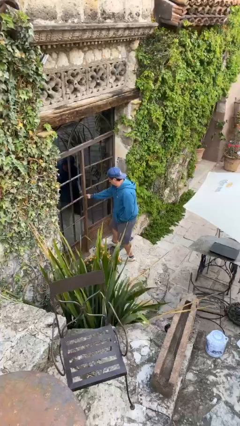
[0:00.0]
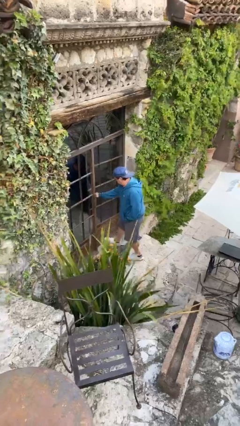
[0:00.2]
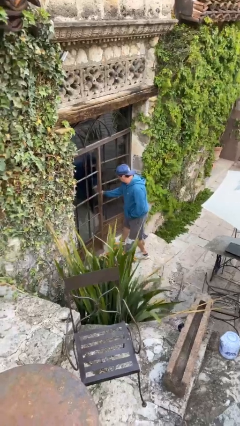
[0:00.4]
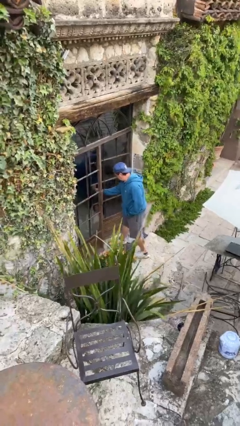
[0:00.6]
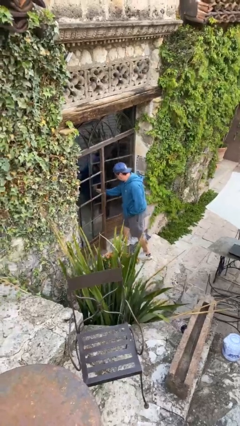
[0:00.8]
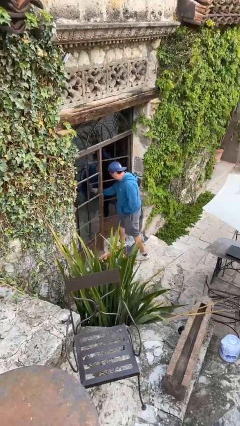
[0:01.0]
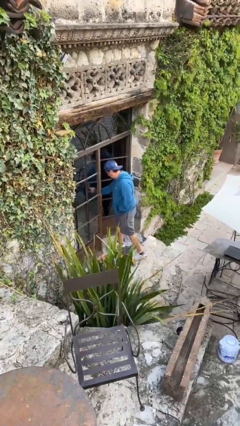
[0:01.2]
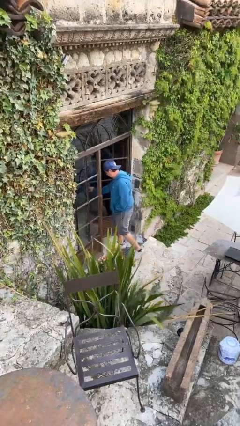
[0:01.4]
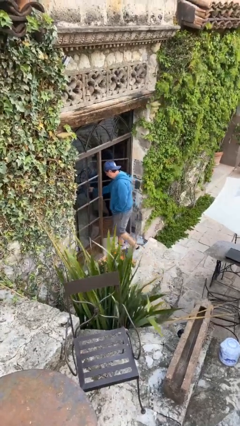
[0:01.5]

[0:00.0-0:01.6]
person opens facility door

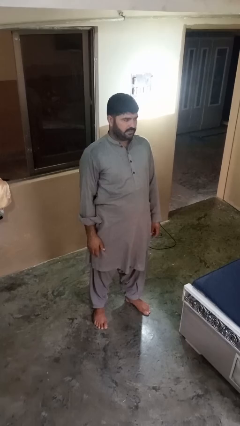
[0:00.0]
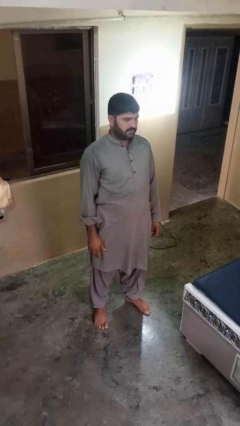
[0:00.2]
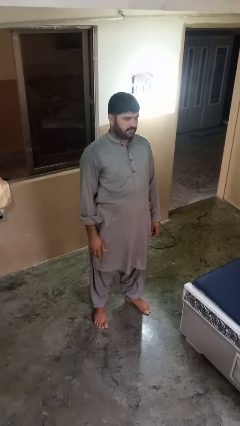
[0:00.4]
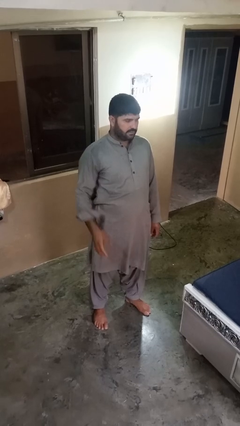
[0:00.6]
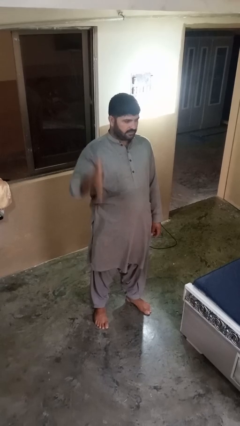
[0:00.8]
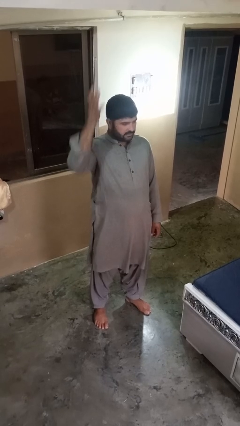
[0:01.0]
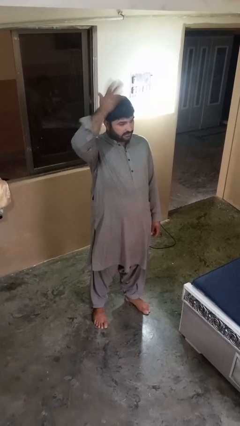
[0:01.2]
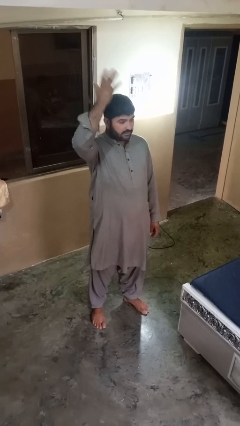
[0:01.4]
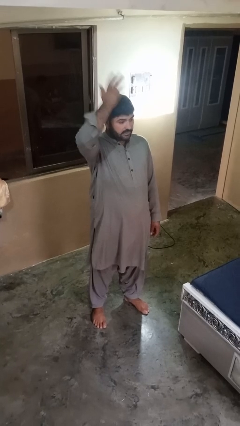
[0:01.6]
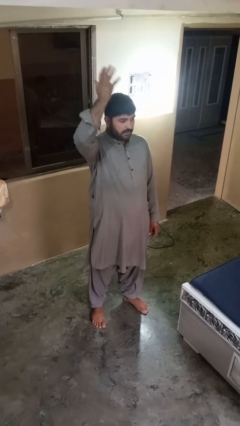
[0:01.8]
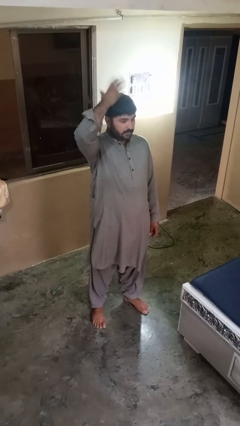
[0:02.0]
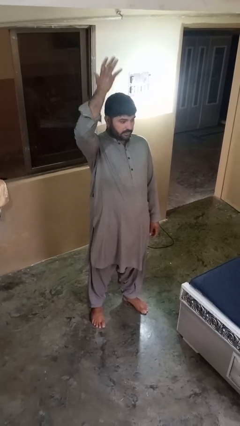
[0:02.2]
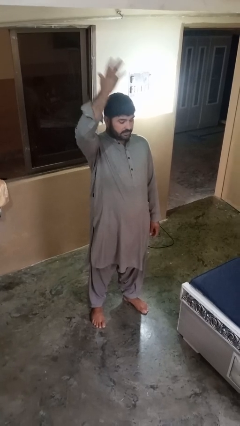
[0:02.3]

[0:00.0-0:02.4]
person pats head

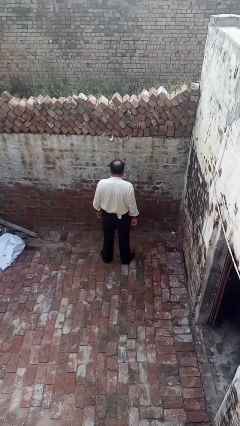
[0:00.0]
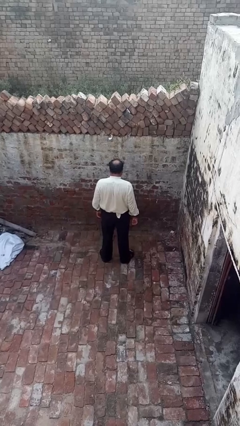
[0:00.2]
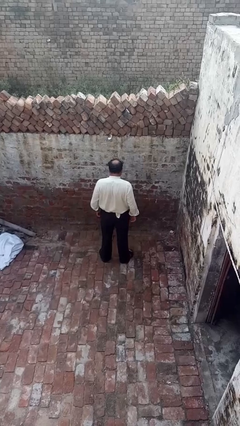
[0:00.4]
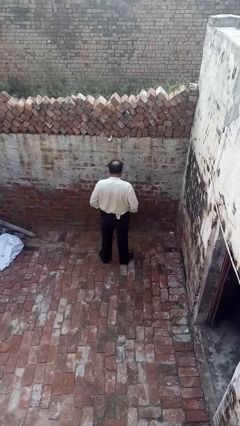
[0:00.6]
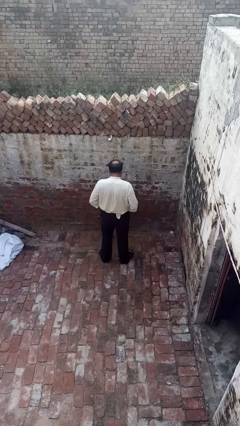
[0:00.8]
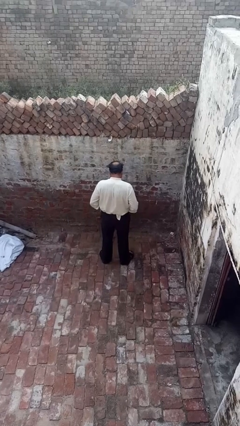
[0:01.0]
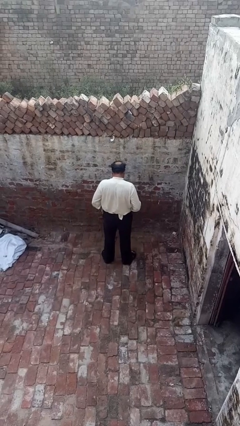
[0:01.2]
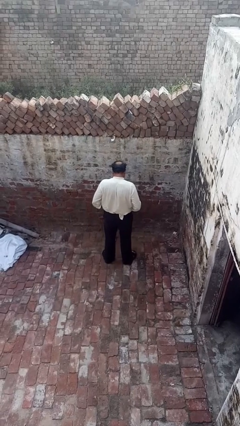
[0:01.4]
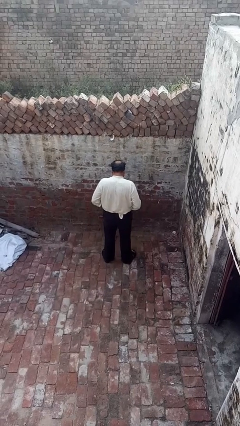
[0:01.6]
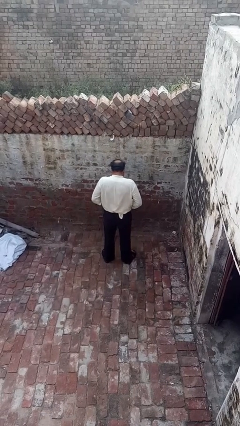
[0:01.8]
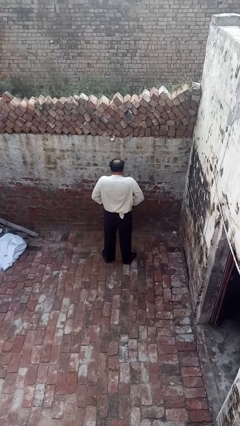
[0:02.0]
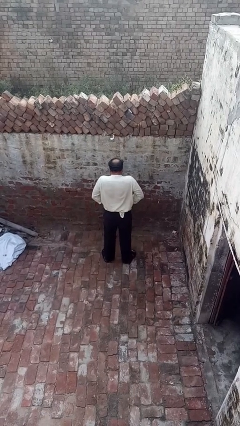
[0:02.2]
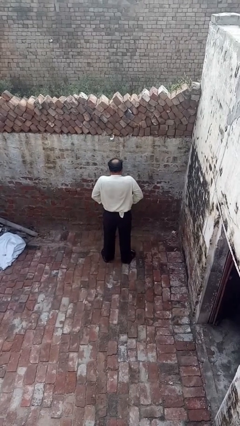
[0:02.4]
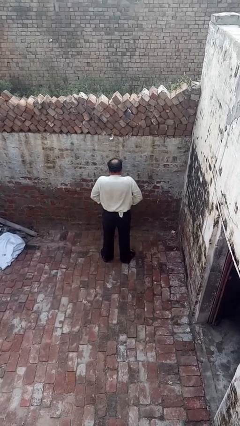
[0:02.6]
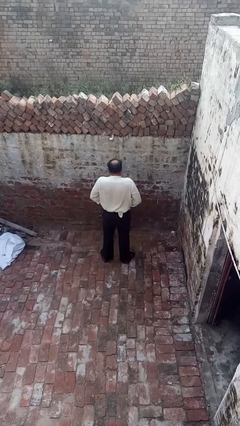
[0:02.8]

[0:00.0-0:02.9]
person hikes up pants

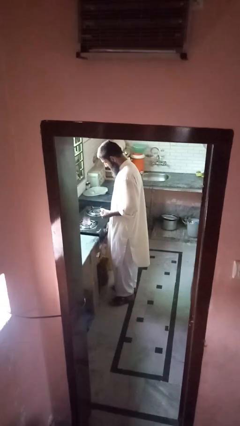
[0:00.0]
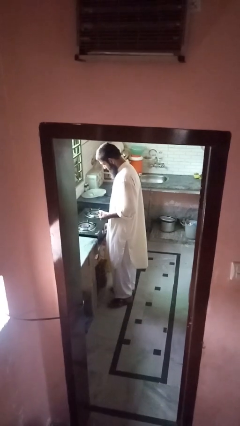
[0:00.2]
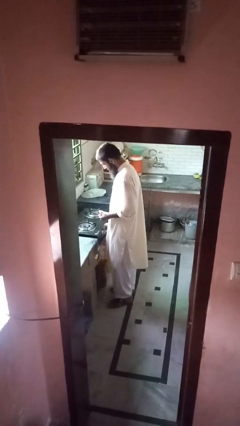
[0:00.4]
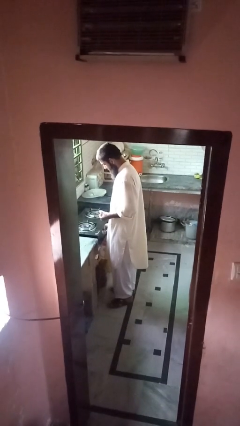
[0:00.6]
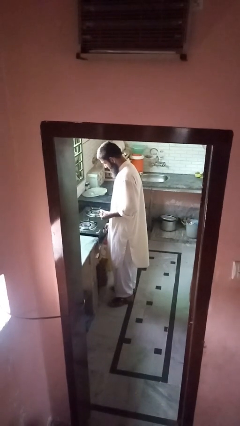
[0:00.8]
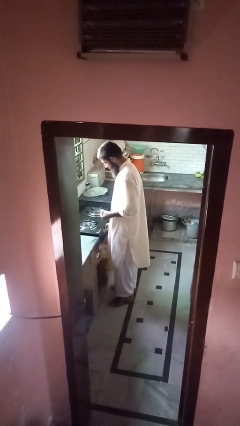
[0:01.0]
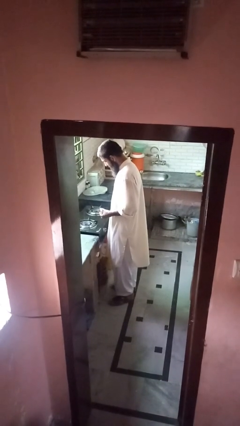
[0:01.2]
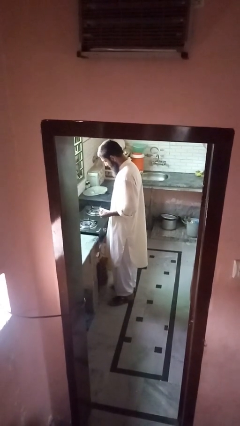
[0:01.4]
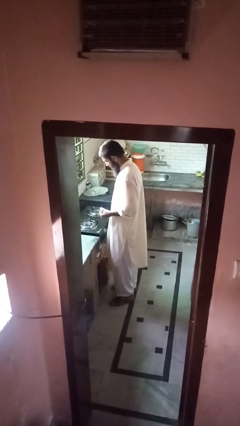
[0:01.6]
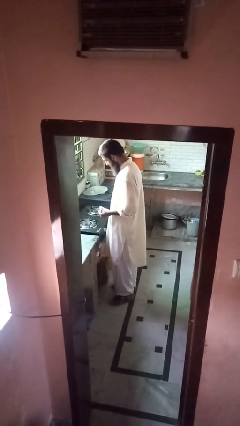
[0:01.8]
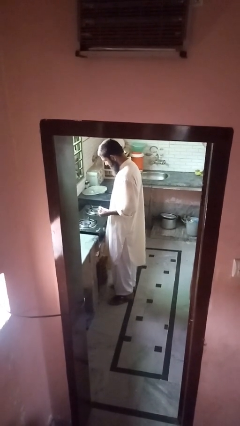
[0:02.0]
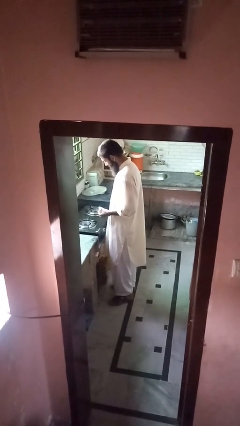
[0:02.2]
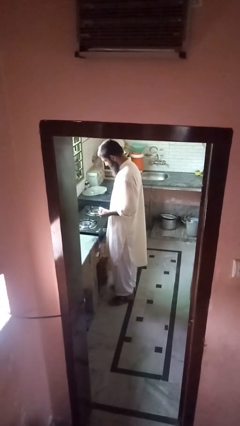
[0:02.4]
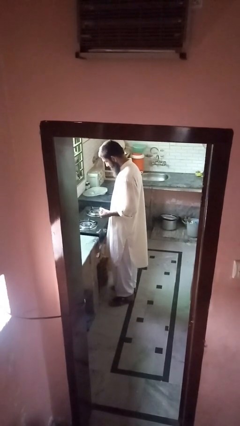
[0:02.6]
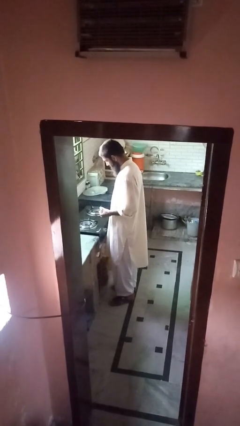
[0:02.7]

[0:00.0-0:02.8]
person turns off stovetop

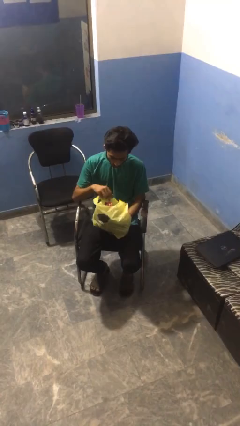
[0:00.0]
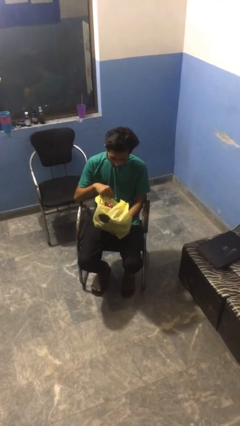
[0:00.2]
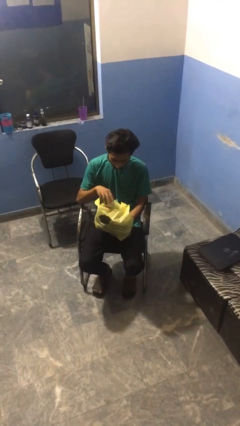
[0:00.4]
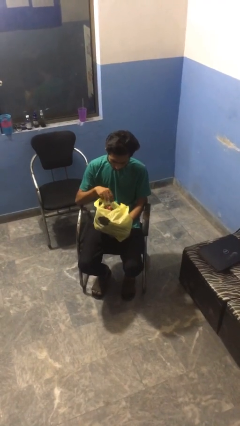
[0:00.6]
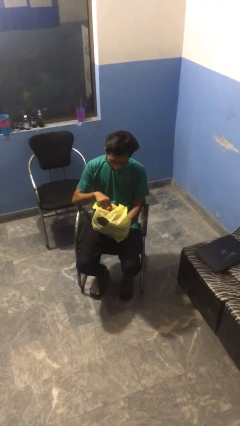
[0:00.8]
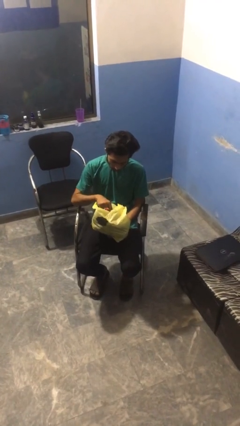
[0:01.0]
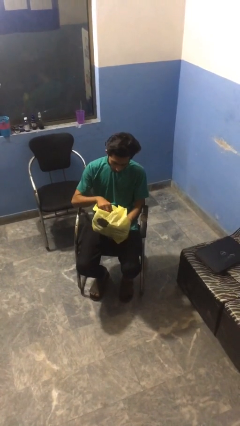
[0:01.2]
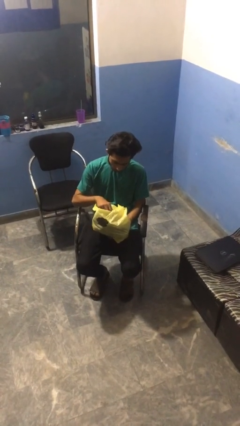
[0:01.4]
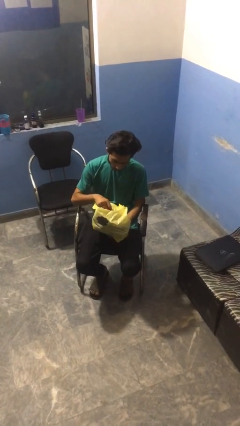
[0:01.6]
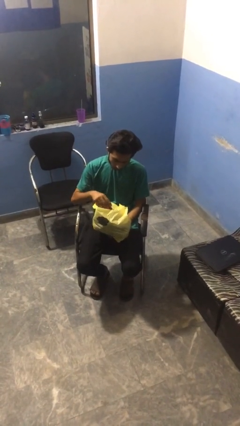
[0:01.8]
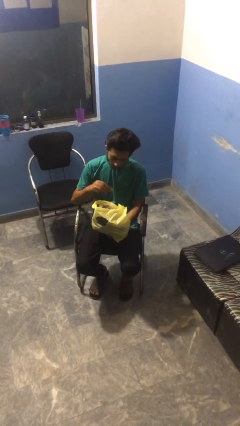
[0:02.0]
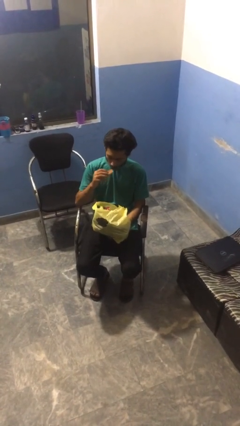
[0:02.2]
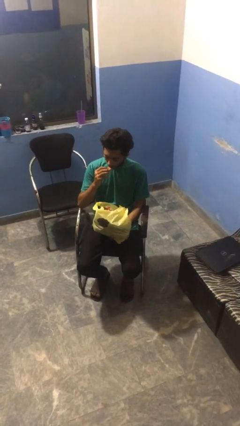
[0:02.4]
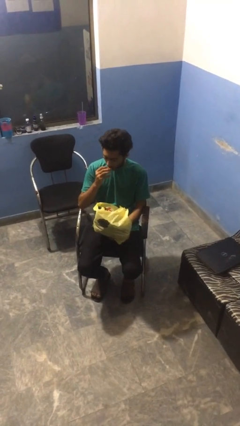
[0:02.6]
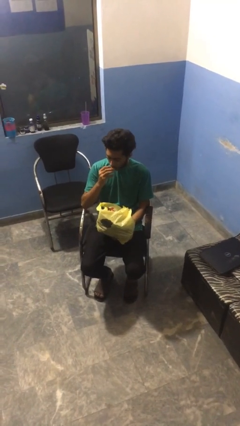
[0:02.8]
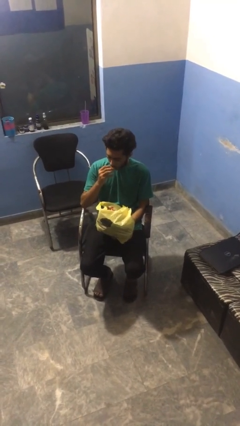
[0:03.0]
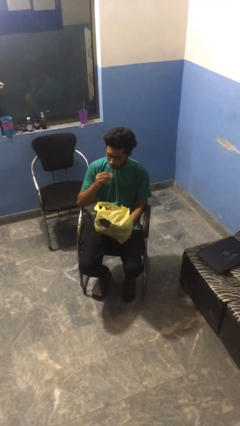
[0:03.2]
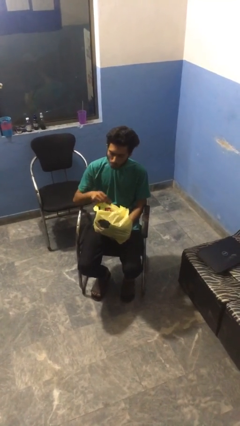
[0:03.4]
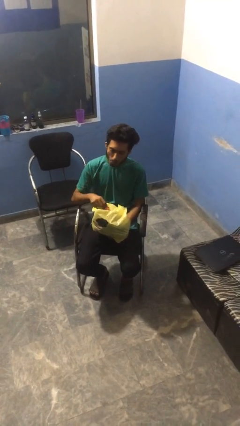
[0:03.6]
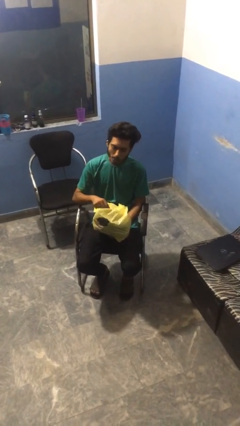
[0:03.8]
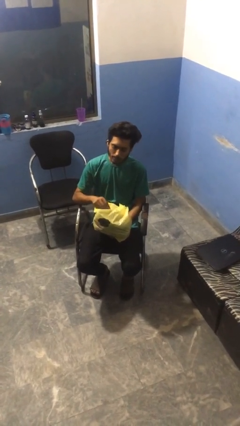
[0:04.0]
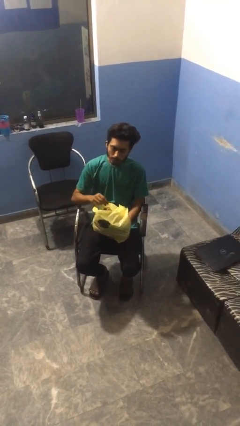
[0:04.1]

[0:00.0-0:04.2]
person eats snack from bag

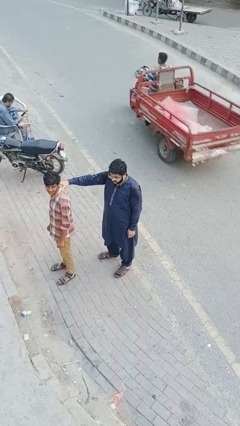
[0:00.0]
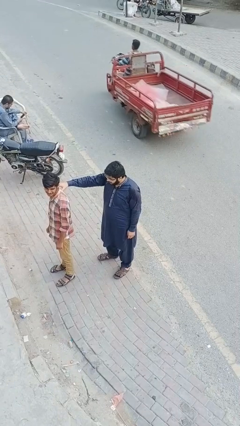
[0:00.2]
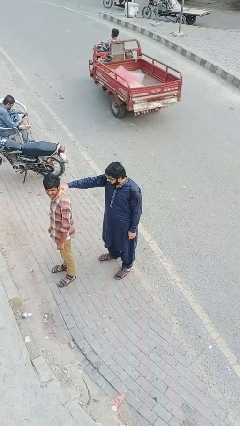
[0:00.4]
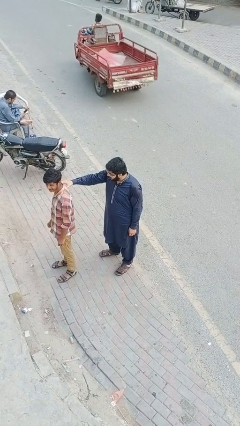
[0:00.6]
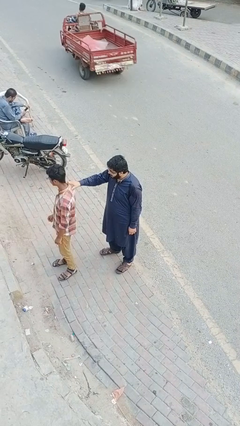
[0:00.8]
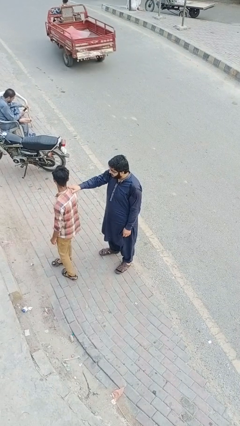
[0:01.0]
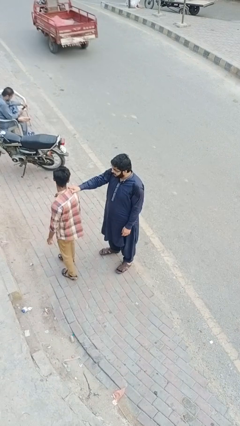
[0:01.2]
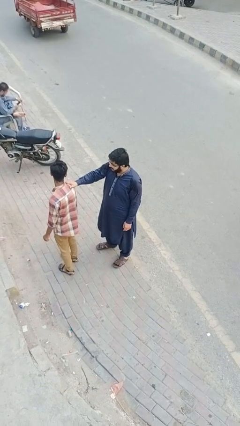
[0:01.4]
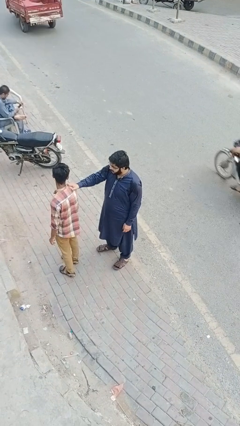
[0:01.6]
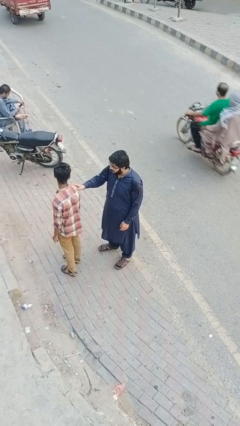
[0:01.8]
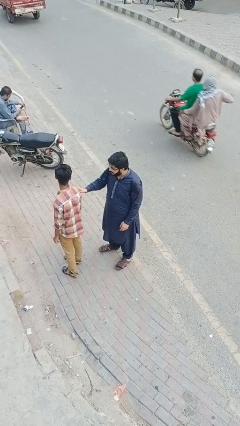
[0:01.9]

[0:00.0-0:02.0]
person grabs person by shoulder

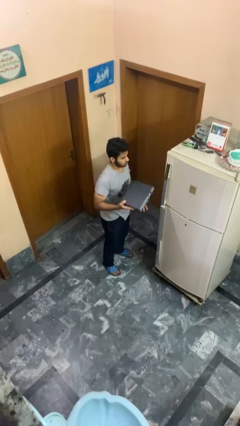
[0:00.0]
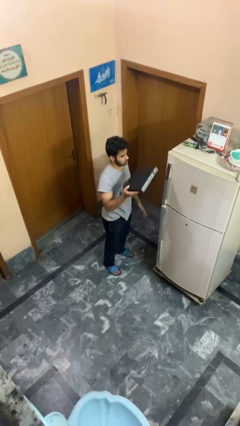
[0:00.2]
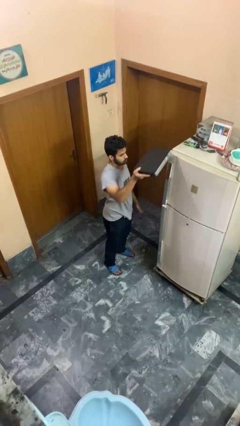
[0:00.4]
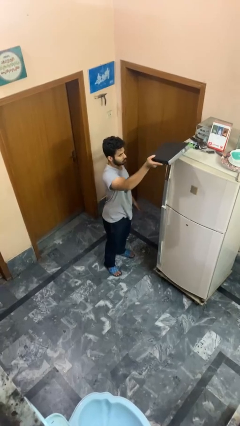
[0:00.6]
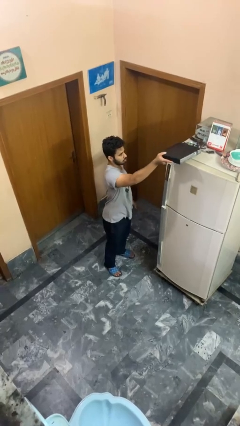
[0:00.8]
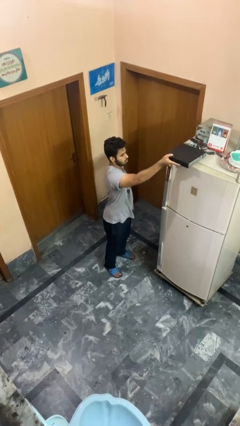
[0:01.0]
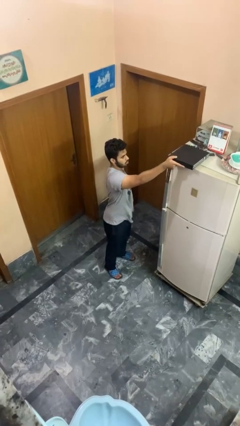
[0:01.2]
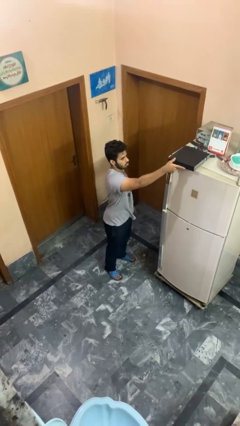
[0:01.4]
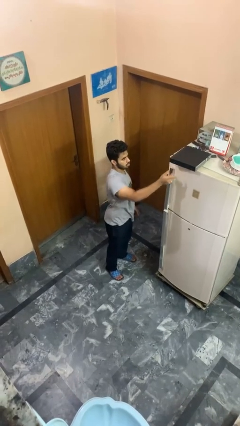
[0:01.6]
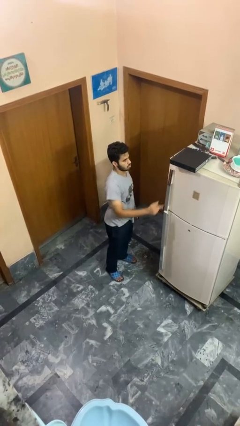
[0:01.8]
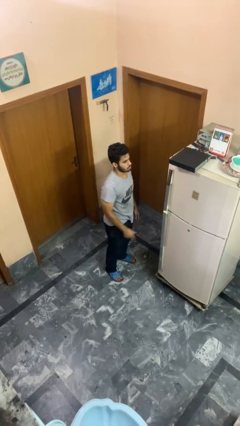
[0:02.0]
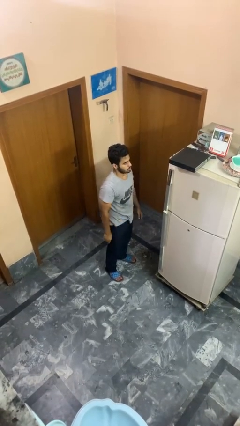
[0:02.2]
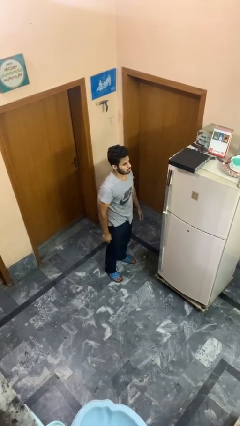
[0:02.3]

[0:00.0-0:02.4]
person puts down object on countertop
